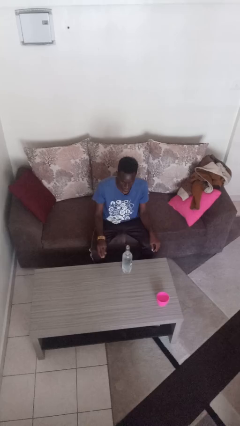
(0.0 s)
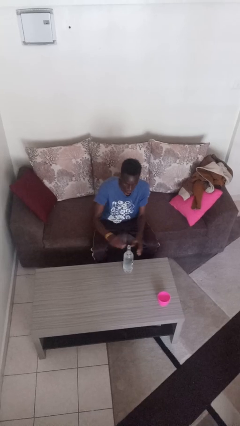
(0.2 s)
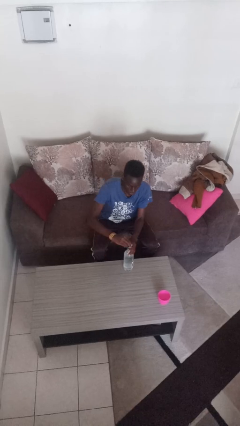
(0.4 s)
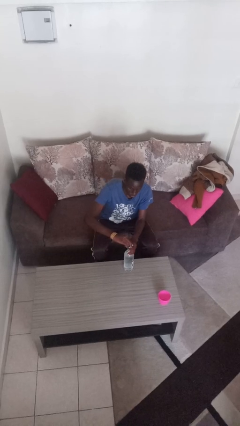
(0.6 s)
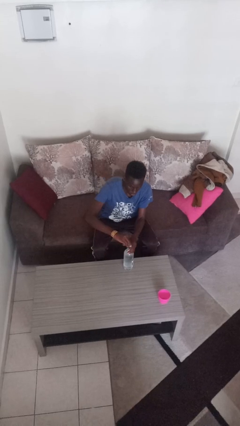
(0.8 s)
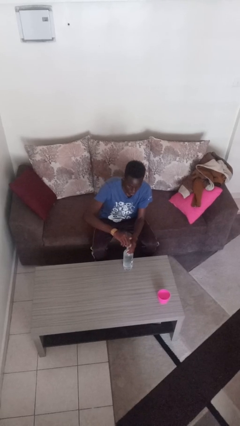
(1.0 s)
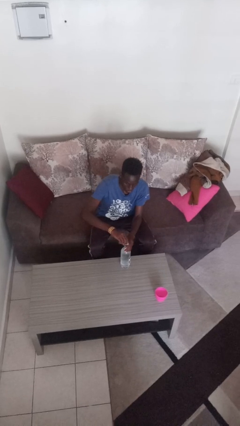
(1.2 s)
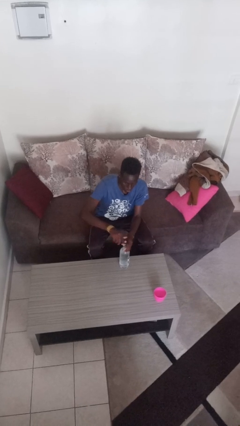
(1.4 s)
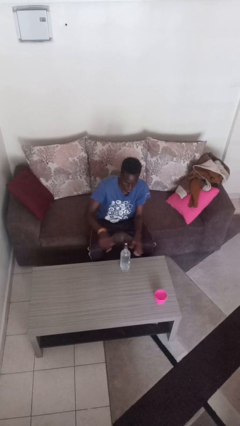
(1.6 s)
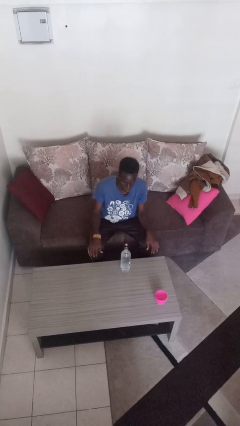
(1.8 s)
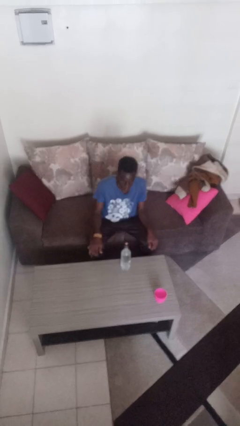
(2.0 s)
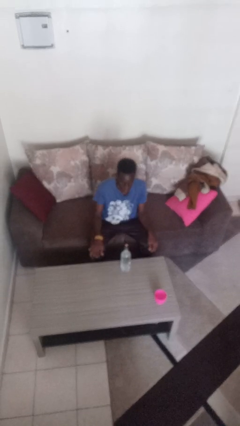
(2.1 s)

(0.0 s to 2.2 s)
person screws lid to bottle

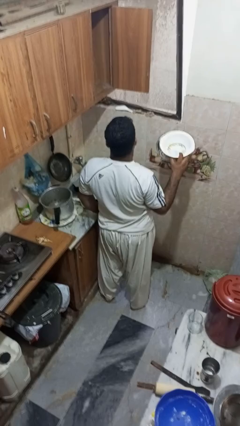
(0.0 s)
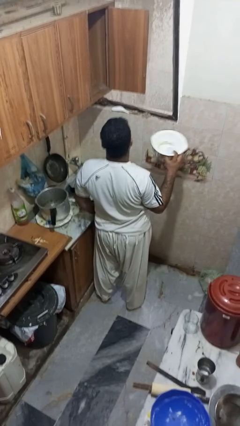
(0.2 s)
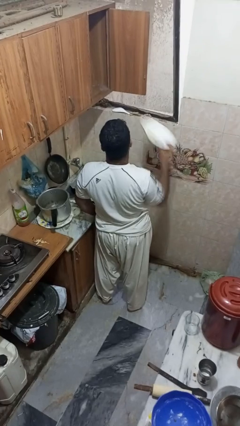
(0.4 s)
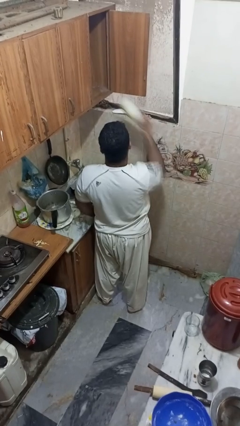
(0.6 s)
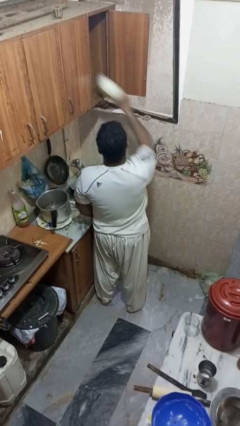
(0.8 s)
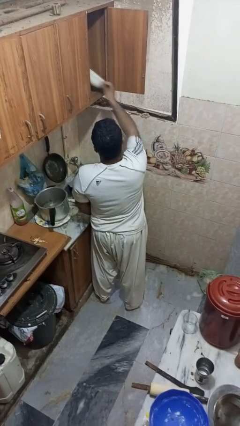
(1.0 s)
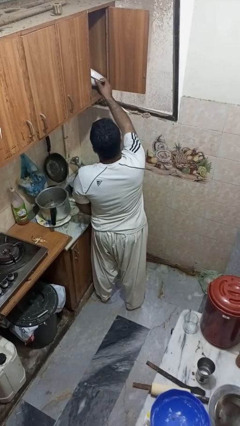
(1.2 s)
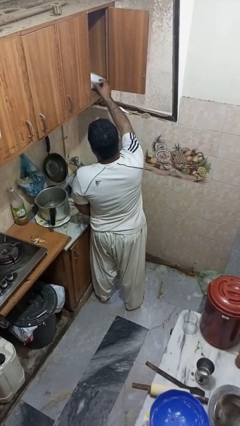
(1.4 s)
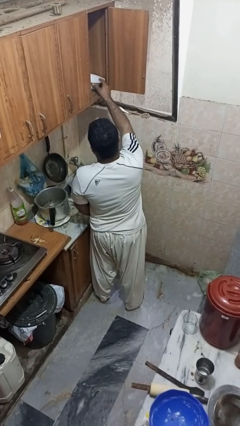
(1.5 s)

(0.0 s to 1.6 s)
person puts object in cabinet

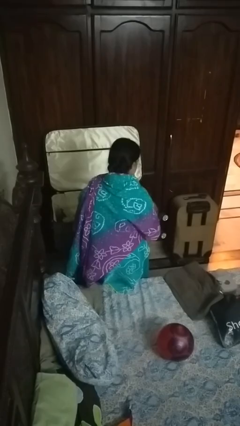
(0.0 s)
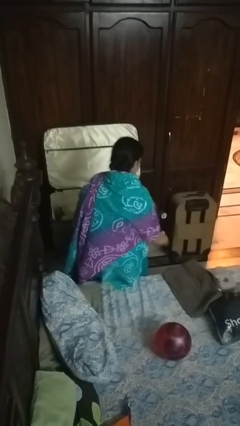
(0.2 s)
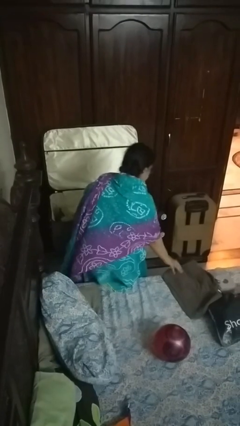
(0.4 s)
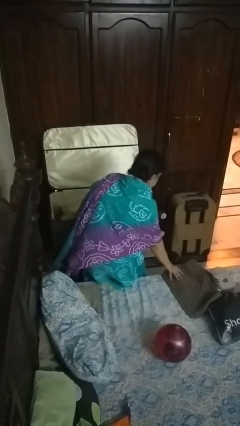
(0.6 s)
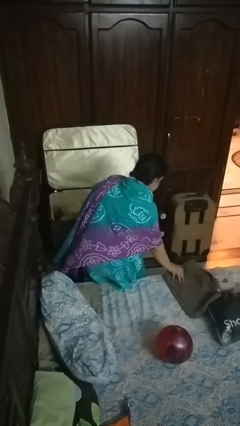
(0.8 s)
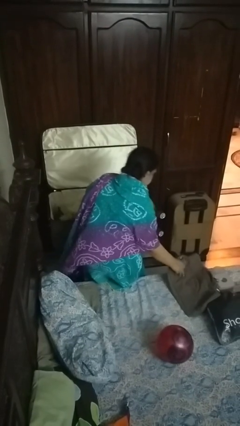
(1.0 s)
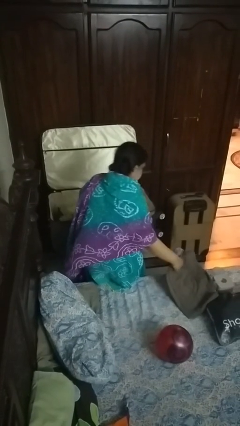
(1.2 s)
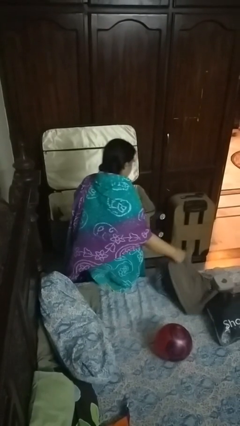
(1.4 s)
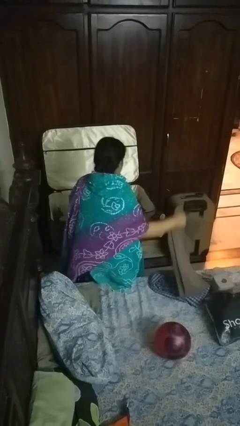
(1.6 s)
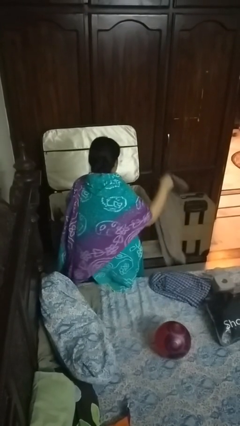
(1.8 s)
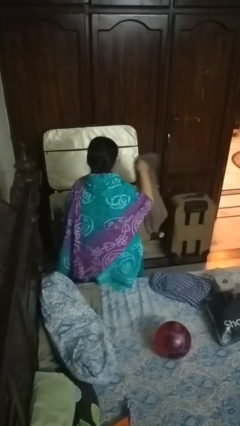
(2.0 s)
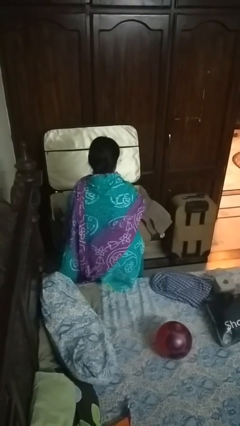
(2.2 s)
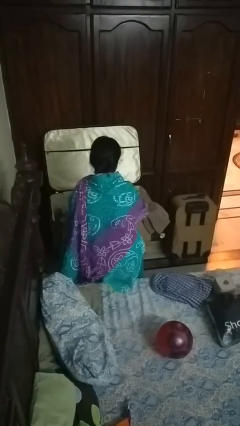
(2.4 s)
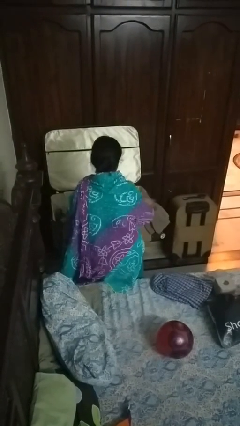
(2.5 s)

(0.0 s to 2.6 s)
person loads clothes into suitcase

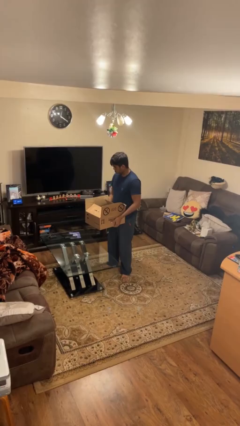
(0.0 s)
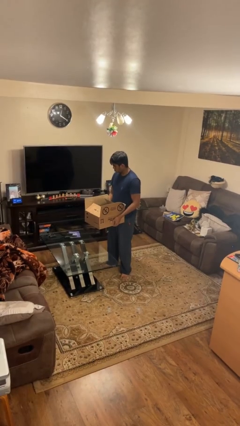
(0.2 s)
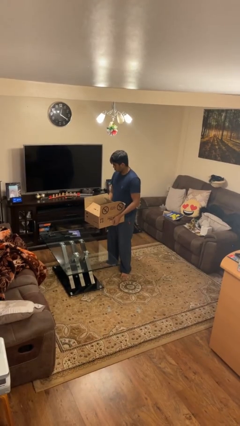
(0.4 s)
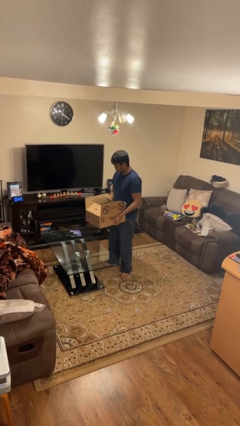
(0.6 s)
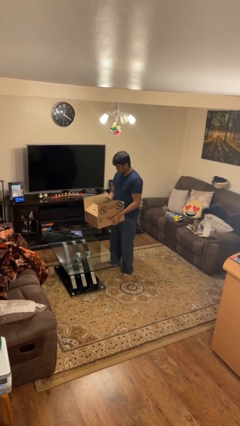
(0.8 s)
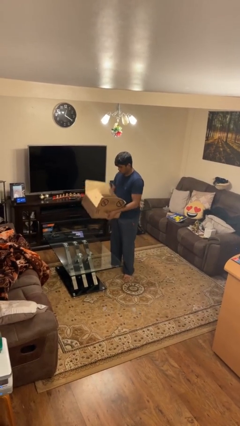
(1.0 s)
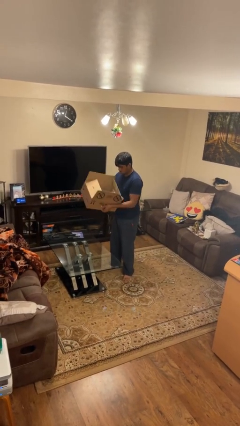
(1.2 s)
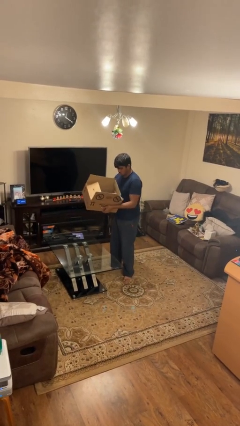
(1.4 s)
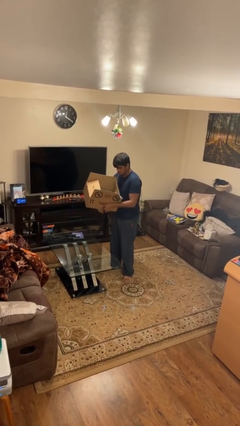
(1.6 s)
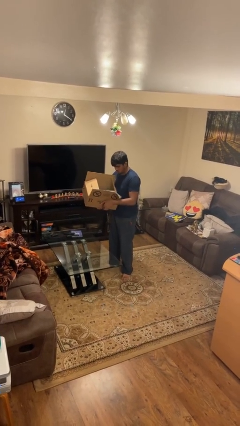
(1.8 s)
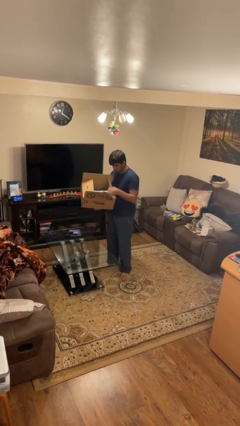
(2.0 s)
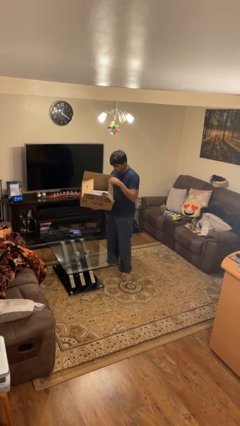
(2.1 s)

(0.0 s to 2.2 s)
person unloads box onto table

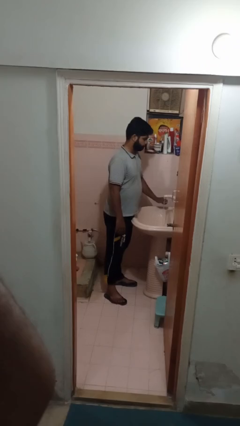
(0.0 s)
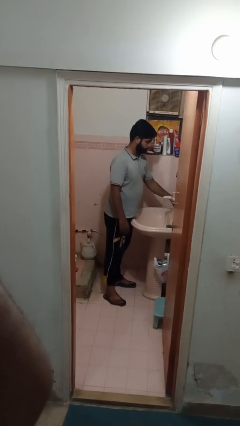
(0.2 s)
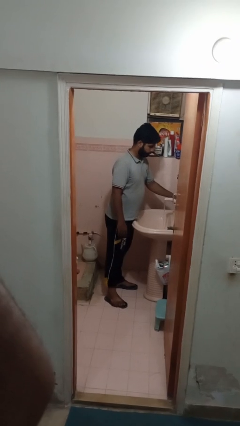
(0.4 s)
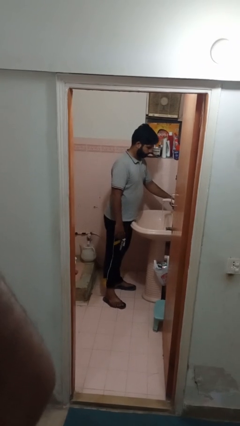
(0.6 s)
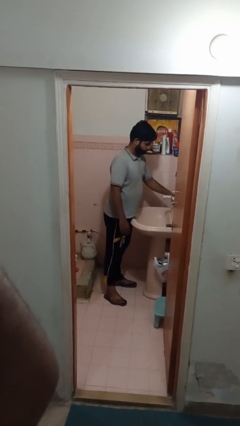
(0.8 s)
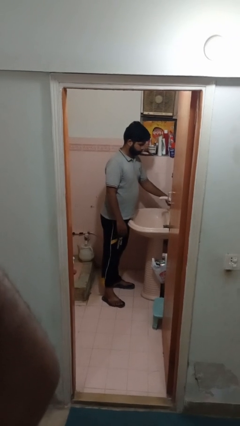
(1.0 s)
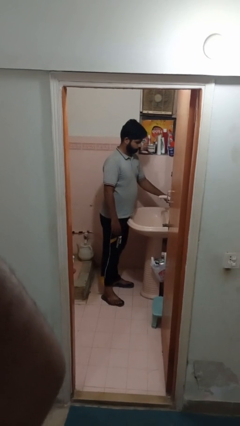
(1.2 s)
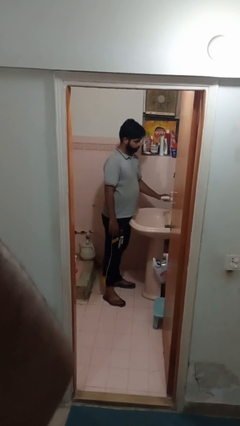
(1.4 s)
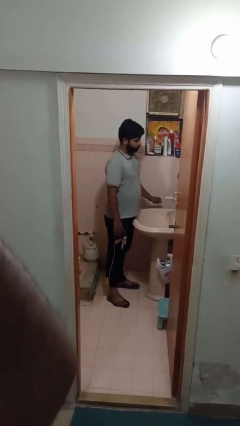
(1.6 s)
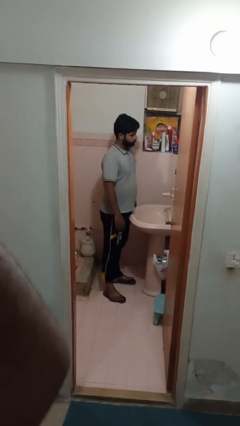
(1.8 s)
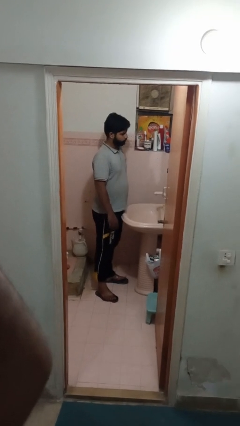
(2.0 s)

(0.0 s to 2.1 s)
person turns off faucet

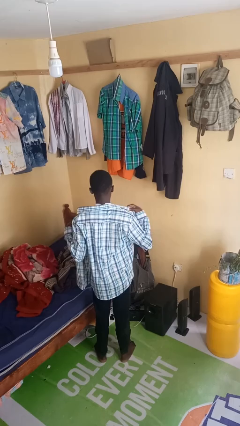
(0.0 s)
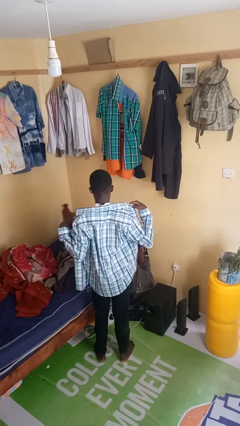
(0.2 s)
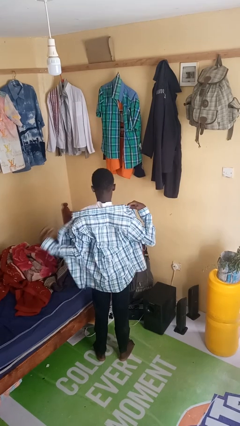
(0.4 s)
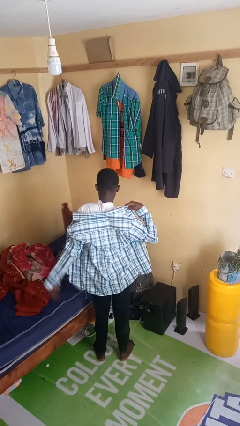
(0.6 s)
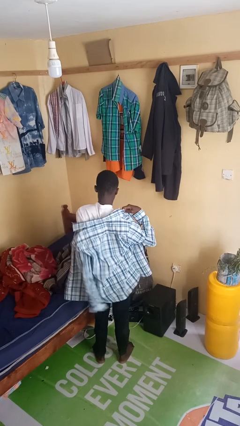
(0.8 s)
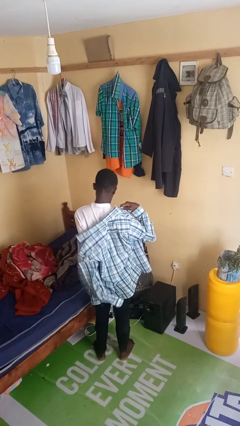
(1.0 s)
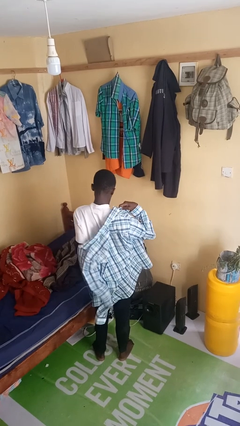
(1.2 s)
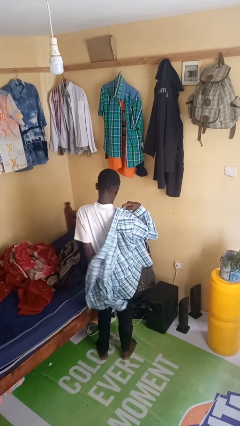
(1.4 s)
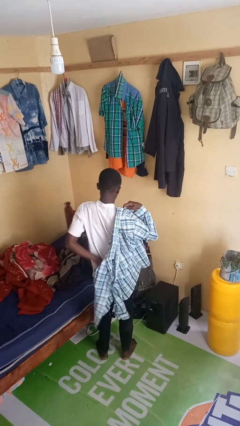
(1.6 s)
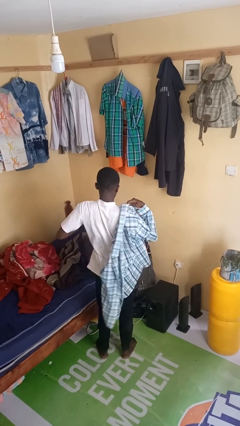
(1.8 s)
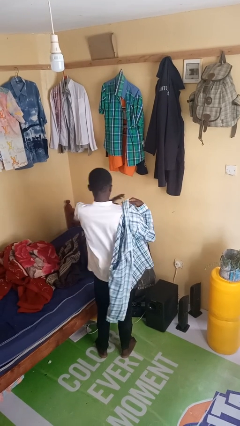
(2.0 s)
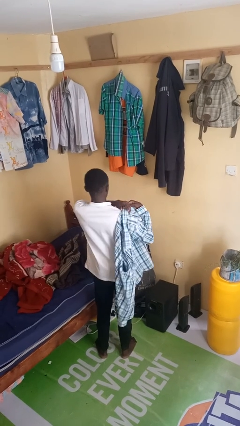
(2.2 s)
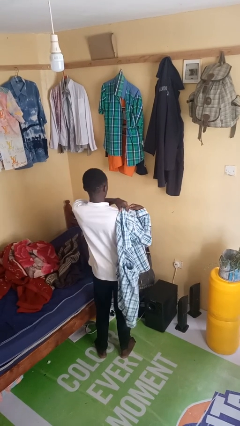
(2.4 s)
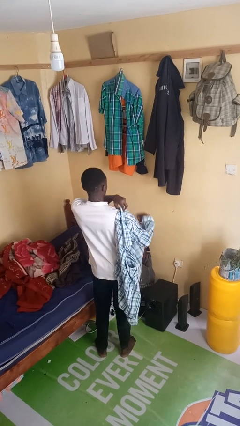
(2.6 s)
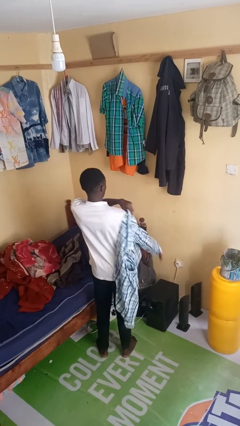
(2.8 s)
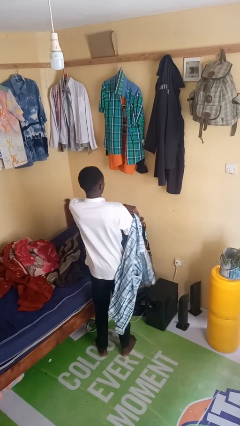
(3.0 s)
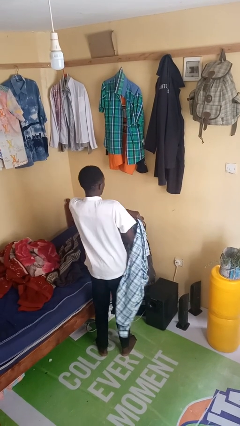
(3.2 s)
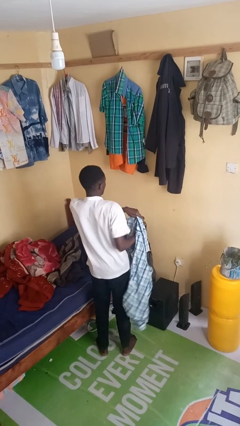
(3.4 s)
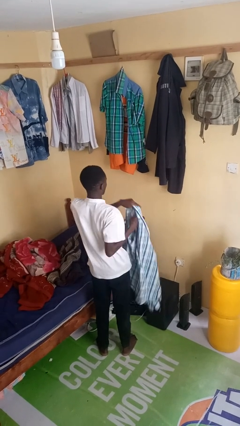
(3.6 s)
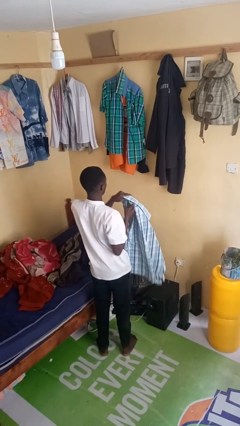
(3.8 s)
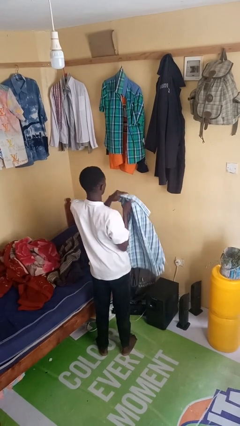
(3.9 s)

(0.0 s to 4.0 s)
person takes off shirt

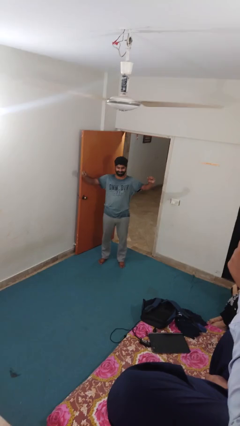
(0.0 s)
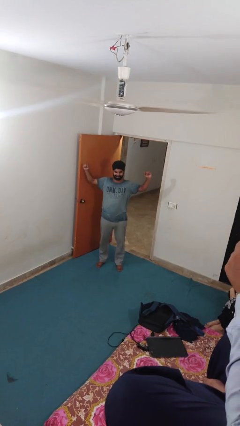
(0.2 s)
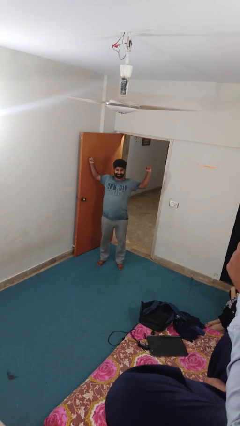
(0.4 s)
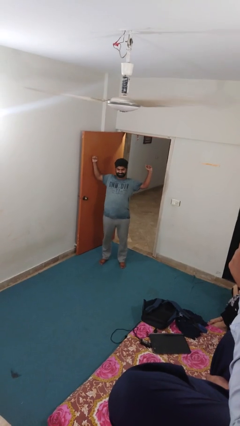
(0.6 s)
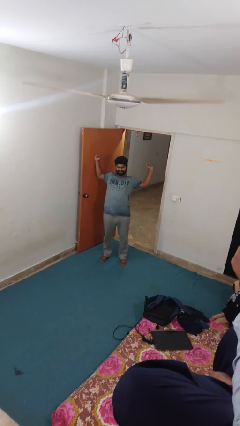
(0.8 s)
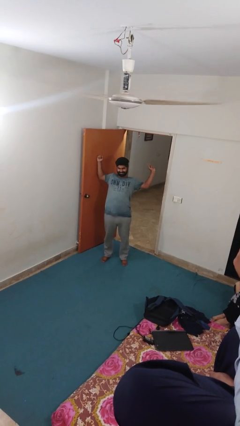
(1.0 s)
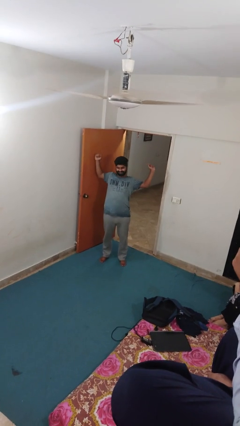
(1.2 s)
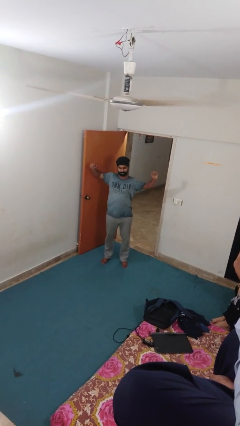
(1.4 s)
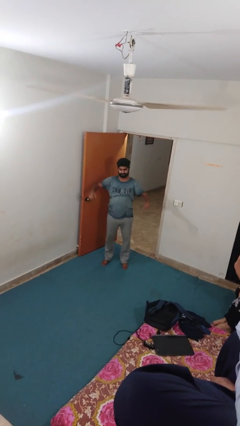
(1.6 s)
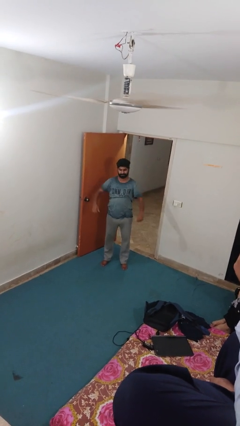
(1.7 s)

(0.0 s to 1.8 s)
person stretches arms to side
